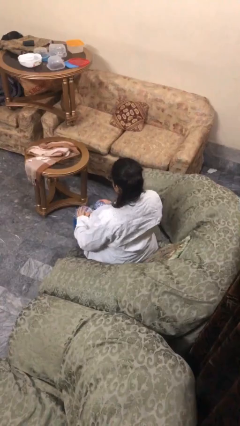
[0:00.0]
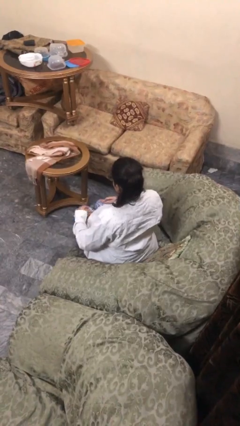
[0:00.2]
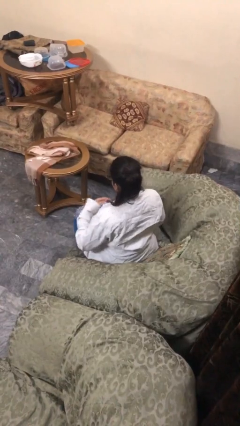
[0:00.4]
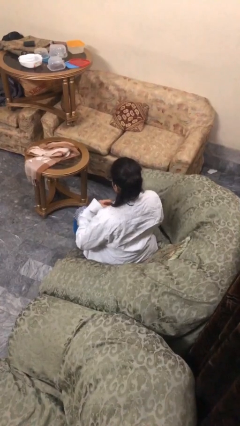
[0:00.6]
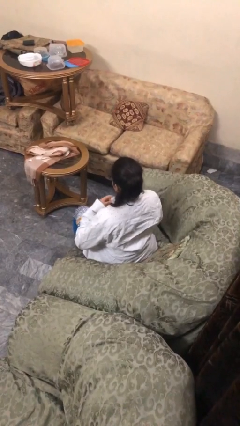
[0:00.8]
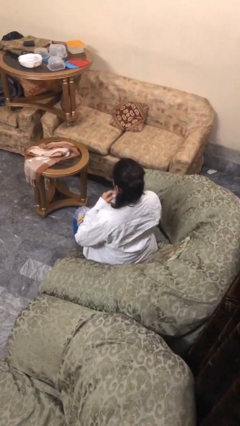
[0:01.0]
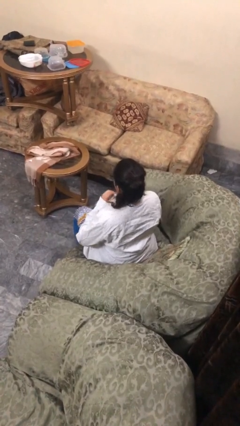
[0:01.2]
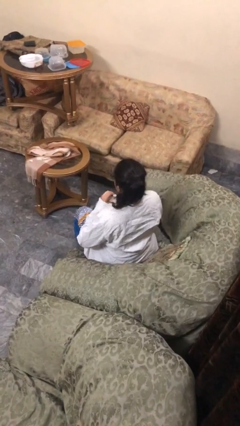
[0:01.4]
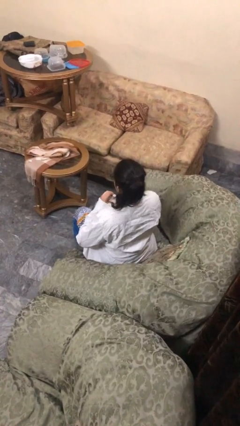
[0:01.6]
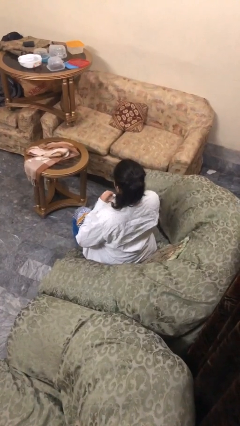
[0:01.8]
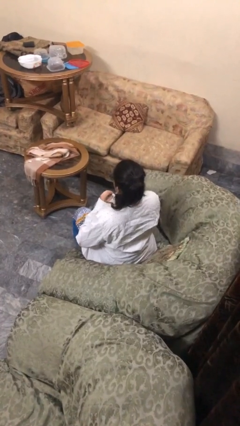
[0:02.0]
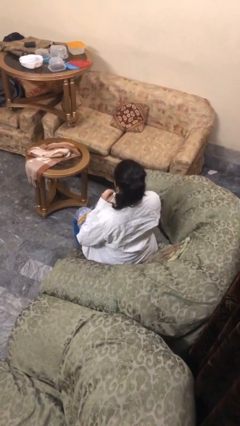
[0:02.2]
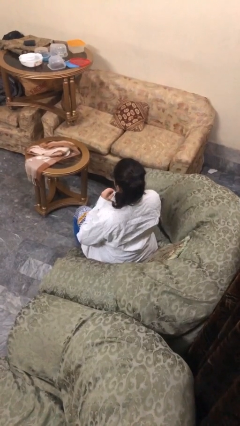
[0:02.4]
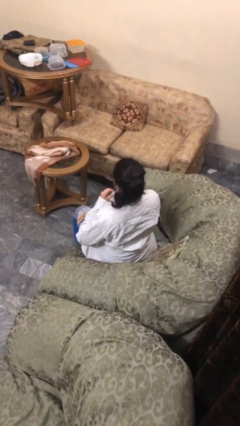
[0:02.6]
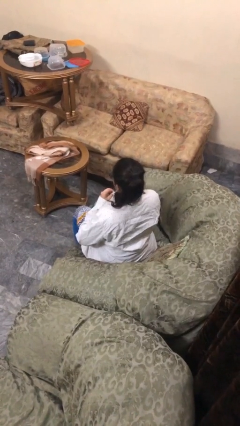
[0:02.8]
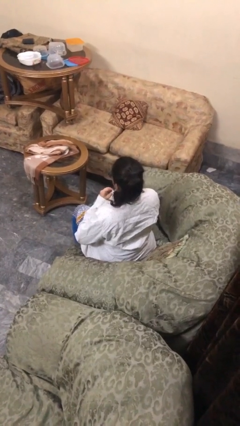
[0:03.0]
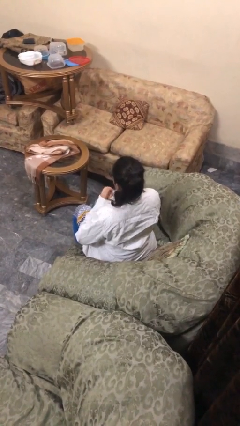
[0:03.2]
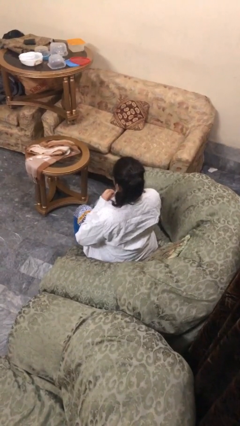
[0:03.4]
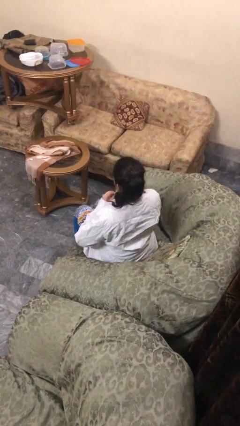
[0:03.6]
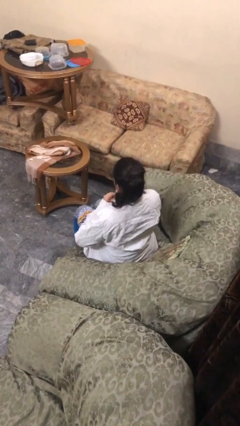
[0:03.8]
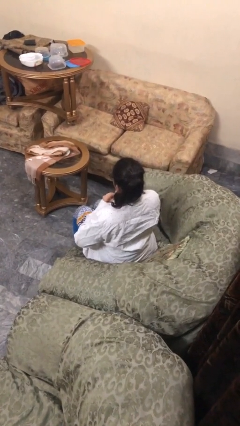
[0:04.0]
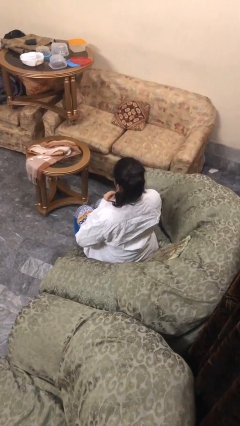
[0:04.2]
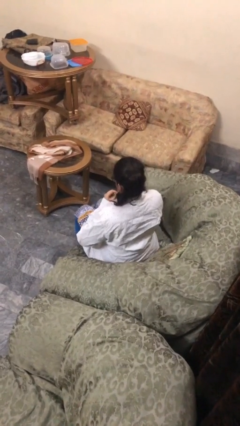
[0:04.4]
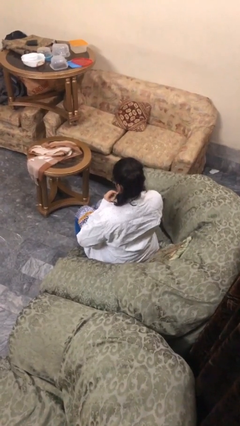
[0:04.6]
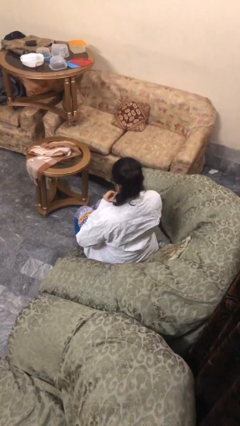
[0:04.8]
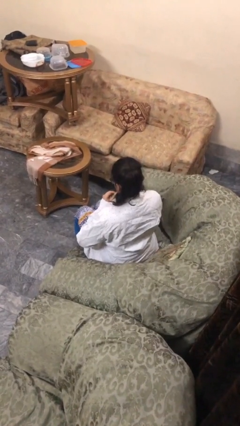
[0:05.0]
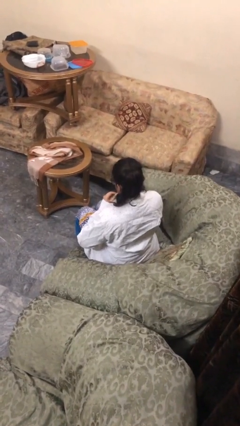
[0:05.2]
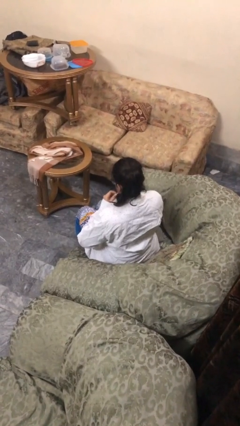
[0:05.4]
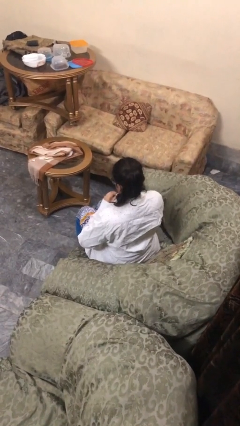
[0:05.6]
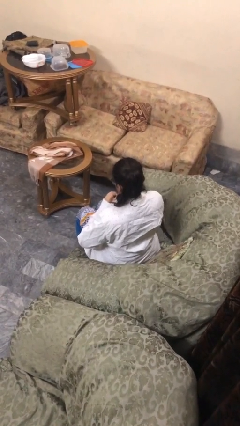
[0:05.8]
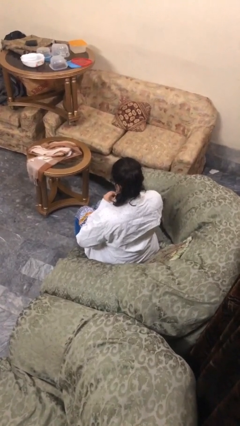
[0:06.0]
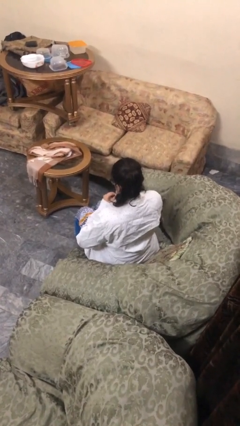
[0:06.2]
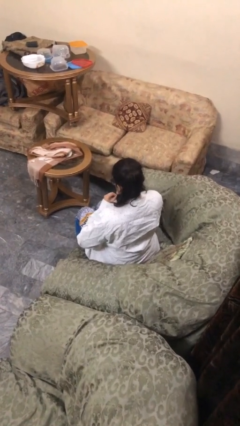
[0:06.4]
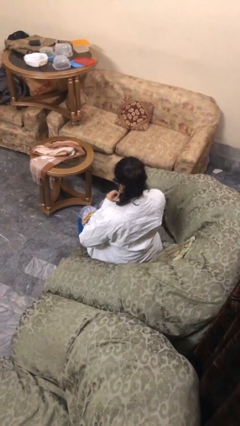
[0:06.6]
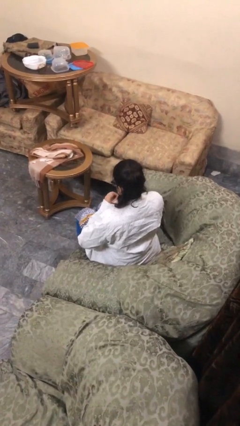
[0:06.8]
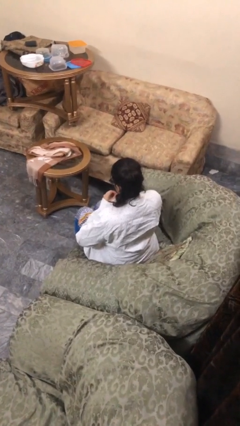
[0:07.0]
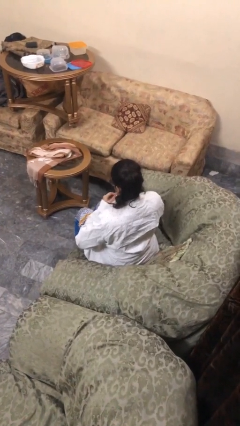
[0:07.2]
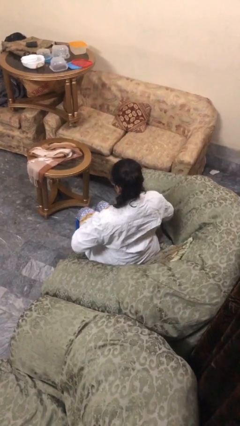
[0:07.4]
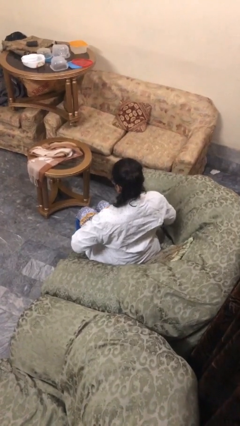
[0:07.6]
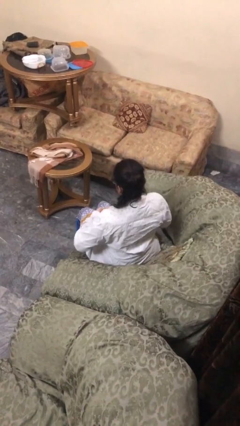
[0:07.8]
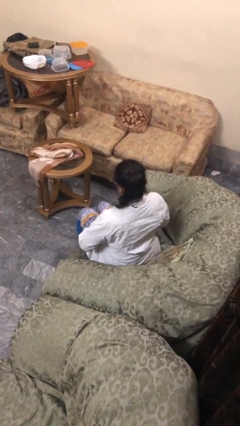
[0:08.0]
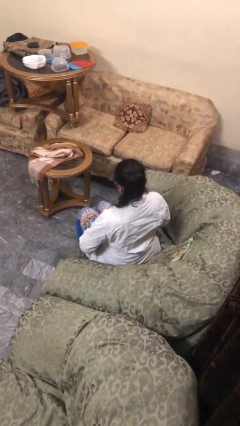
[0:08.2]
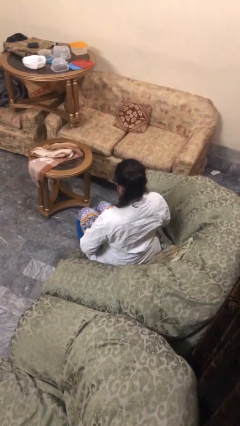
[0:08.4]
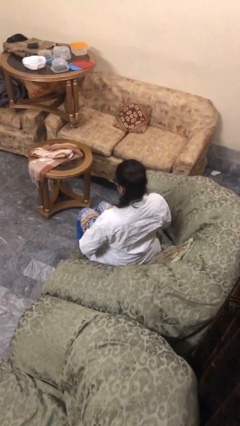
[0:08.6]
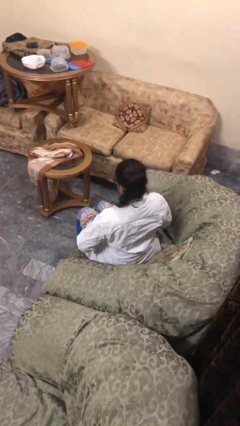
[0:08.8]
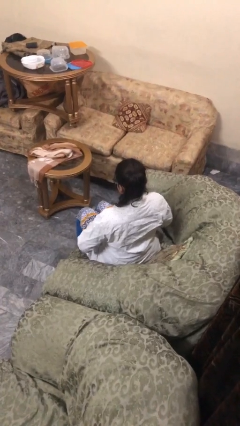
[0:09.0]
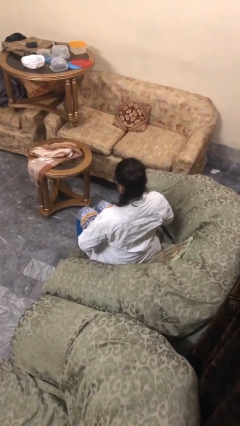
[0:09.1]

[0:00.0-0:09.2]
person buttons shirt

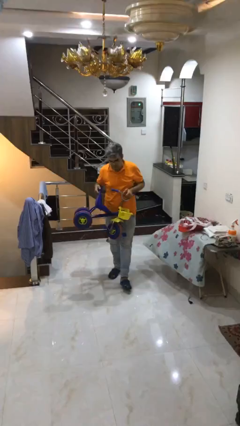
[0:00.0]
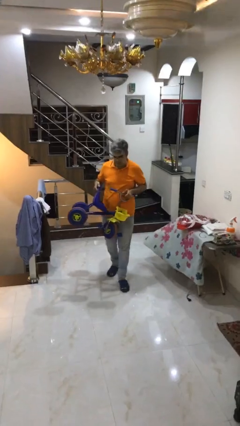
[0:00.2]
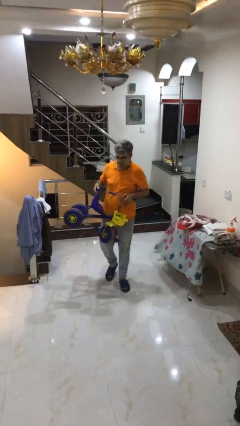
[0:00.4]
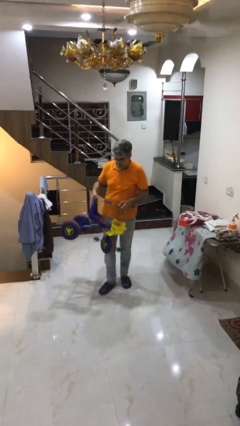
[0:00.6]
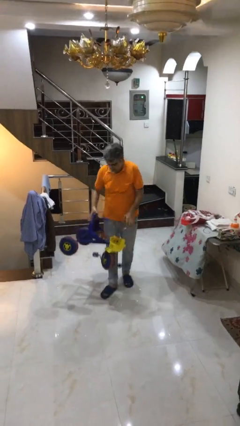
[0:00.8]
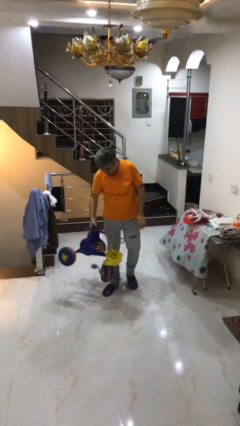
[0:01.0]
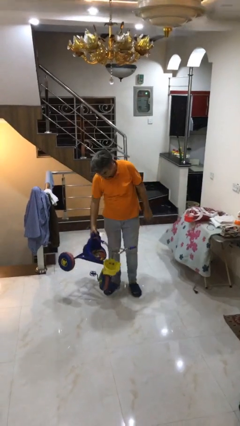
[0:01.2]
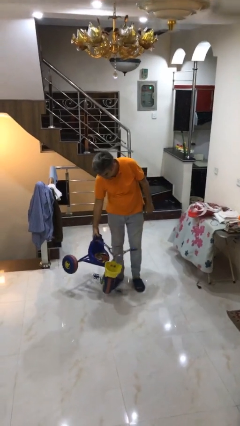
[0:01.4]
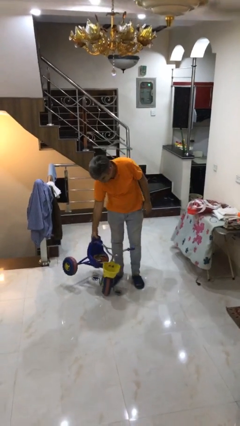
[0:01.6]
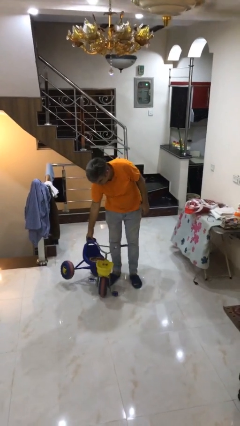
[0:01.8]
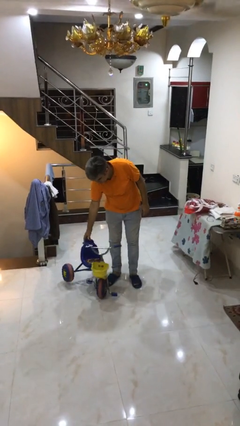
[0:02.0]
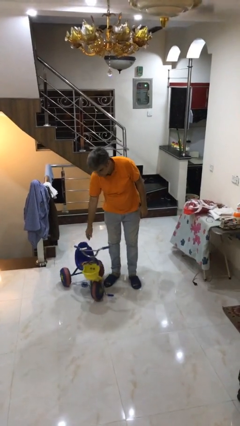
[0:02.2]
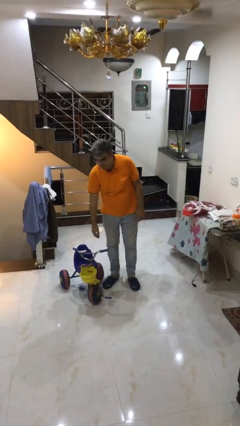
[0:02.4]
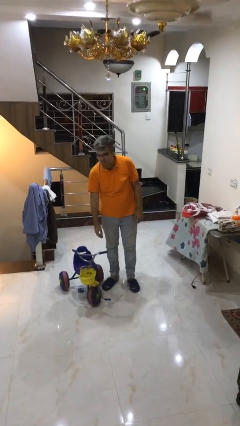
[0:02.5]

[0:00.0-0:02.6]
person puts down object on floor

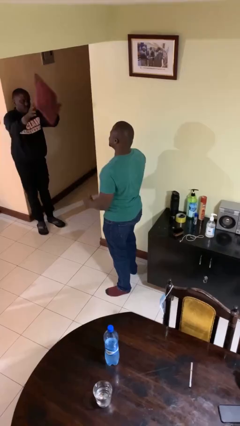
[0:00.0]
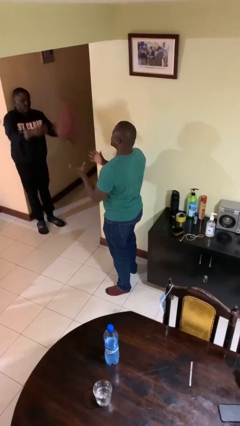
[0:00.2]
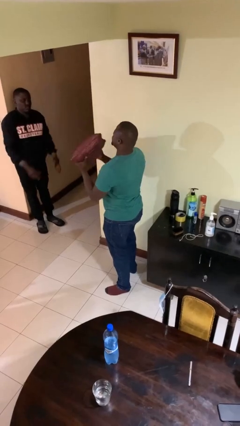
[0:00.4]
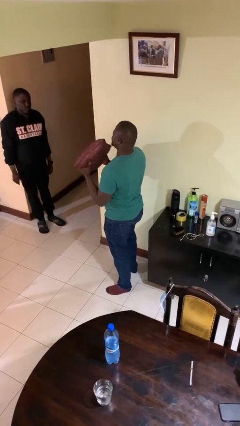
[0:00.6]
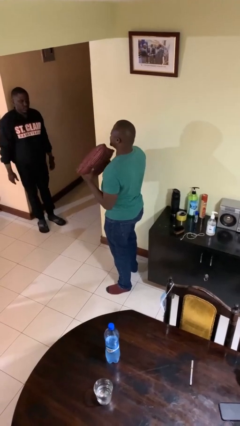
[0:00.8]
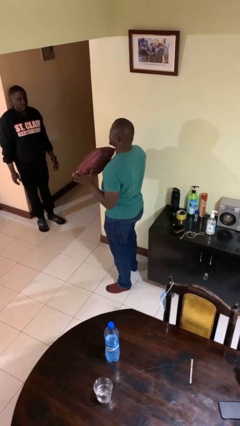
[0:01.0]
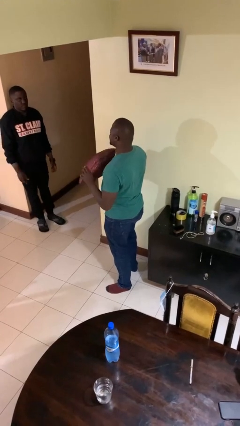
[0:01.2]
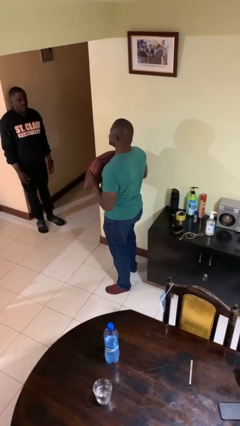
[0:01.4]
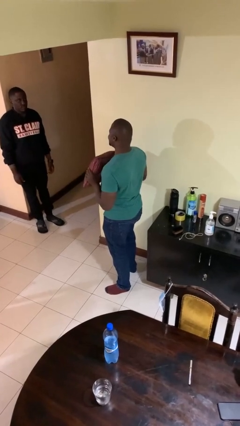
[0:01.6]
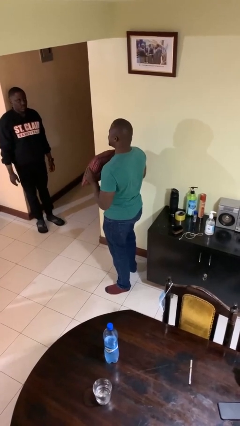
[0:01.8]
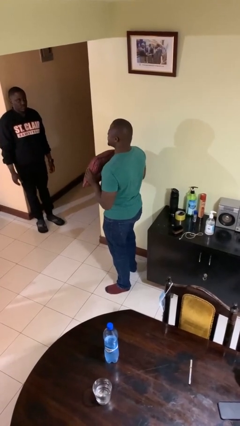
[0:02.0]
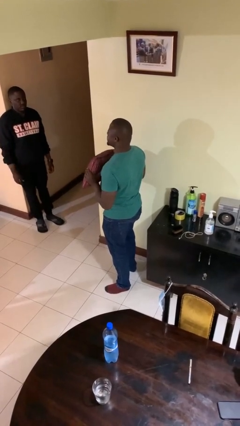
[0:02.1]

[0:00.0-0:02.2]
person catches object from person

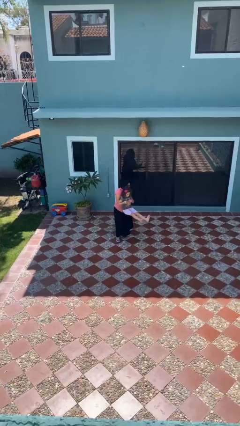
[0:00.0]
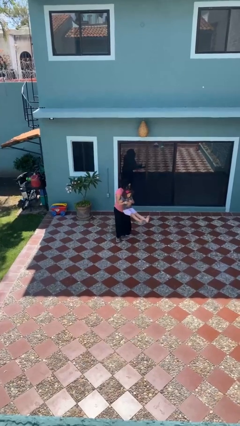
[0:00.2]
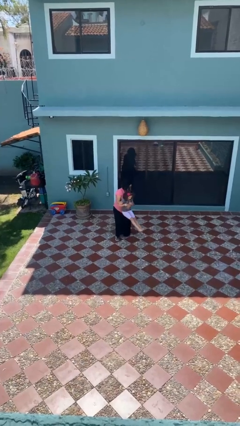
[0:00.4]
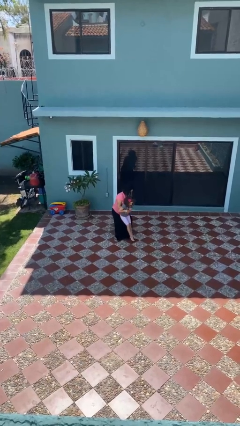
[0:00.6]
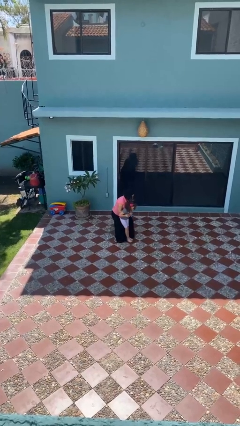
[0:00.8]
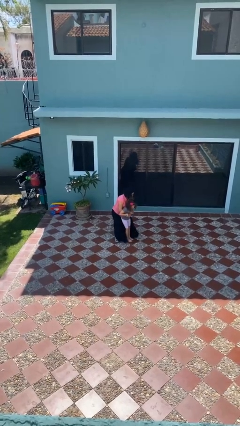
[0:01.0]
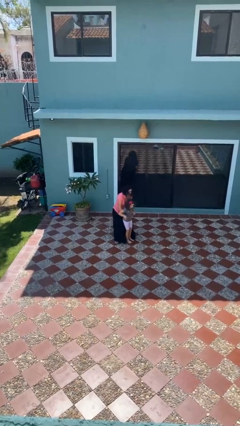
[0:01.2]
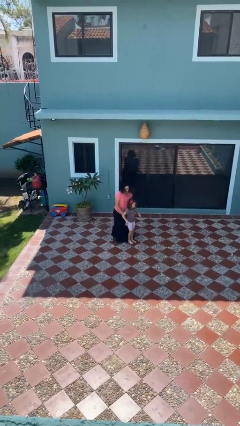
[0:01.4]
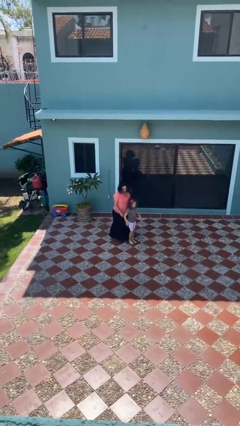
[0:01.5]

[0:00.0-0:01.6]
person puts down person

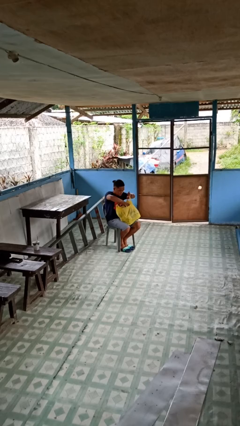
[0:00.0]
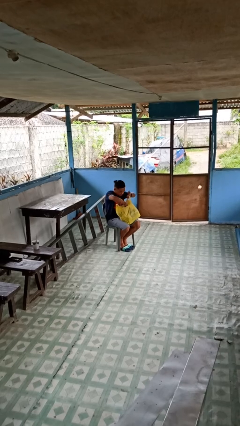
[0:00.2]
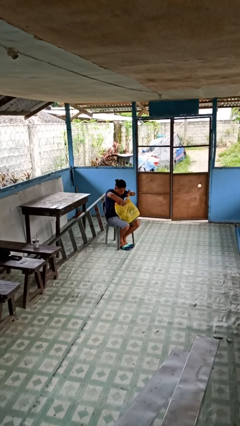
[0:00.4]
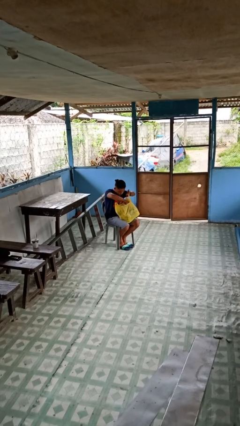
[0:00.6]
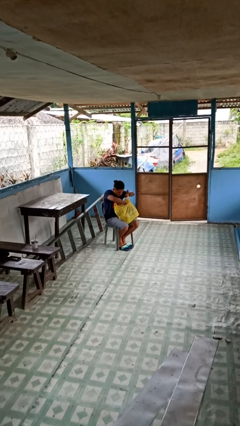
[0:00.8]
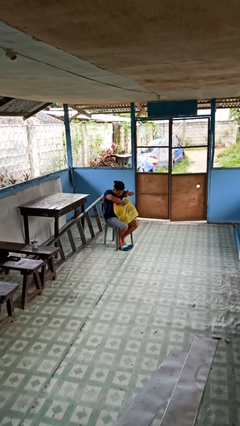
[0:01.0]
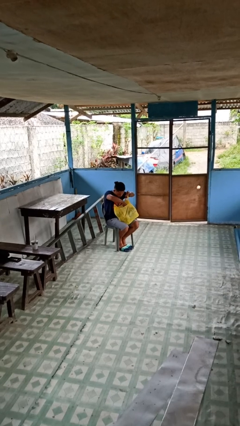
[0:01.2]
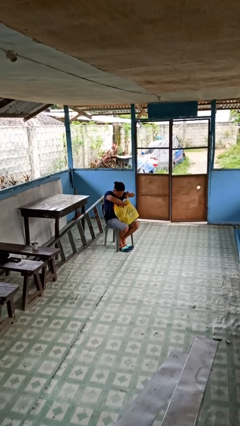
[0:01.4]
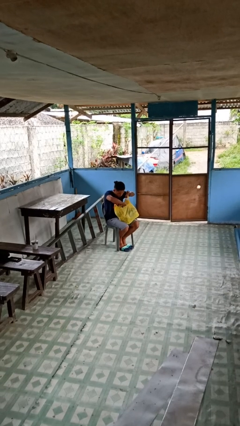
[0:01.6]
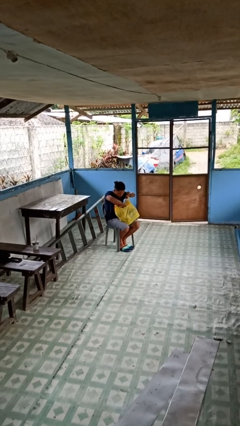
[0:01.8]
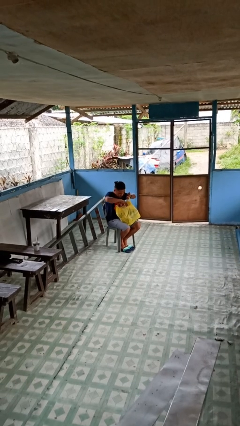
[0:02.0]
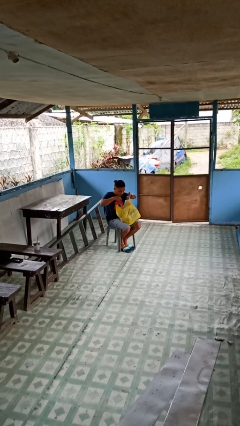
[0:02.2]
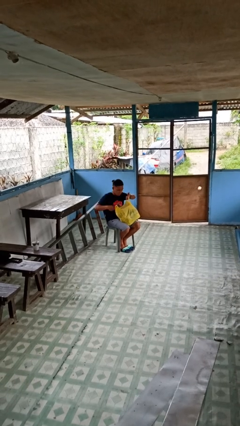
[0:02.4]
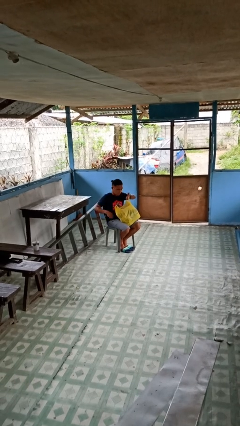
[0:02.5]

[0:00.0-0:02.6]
person searches in bag
